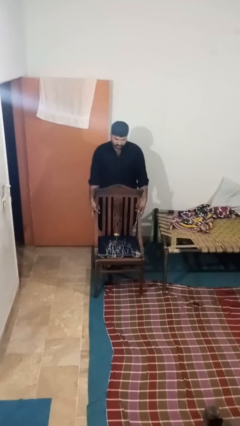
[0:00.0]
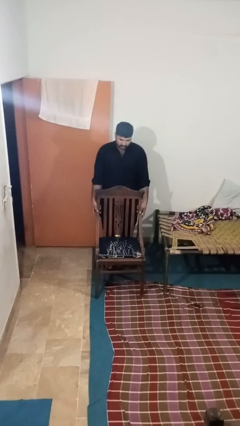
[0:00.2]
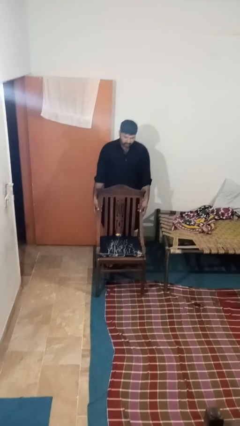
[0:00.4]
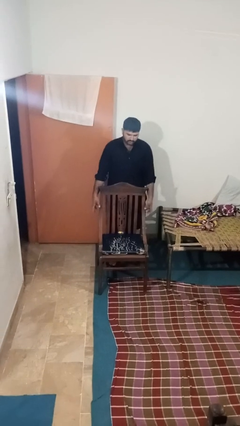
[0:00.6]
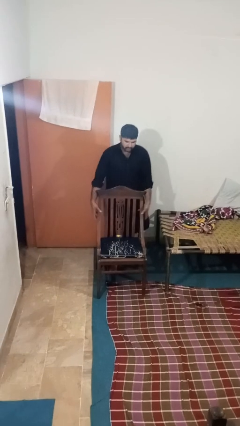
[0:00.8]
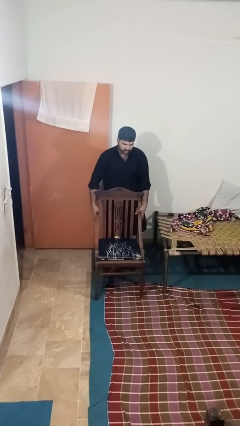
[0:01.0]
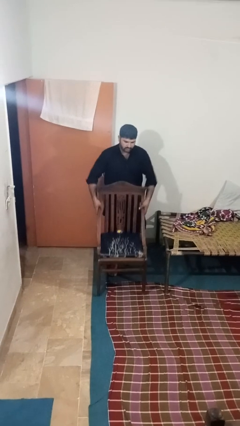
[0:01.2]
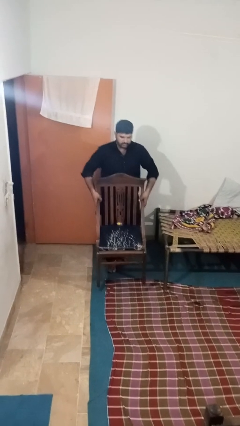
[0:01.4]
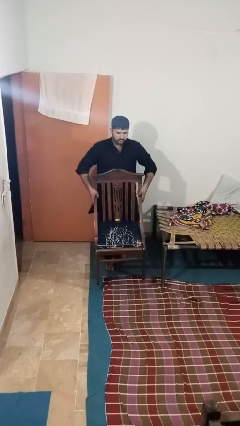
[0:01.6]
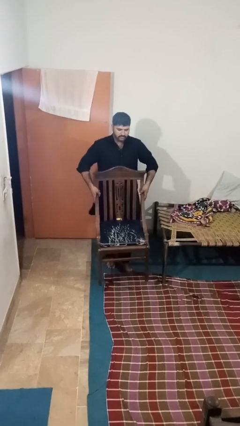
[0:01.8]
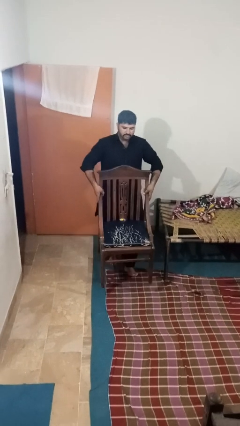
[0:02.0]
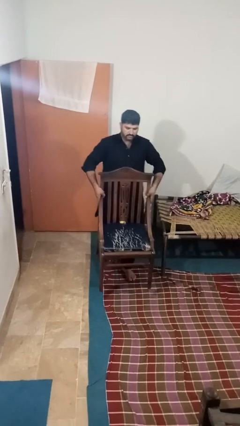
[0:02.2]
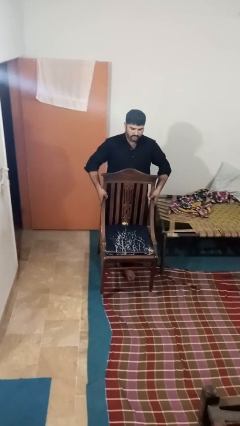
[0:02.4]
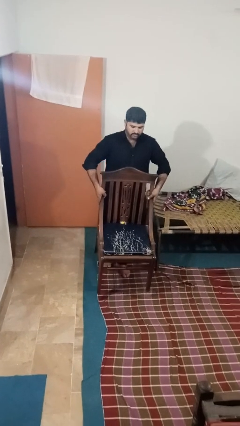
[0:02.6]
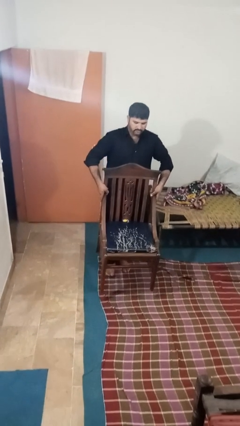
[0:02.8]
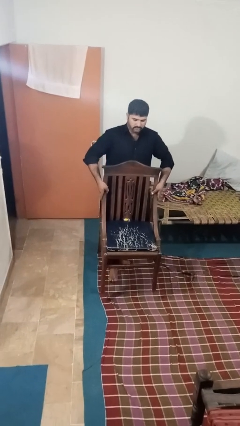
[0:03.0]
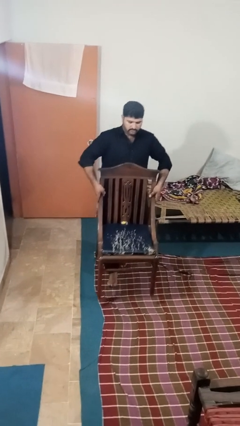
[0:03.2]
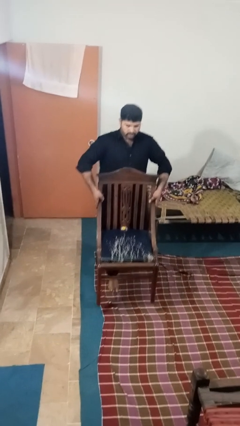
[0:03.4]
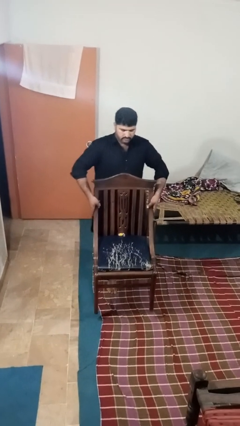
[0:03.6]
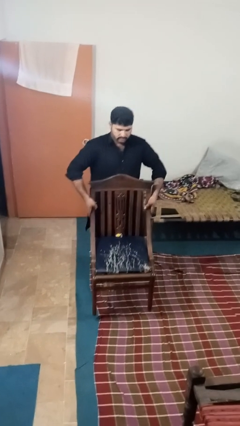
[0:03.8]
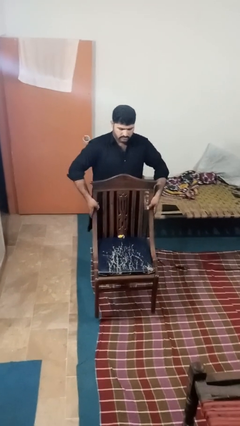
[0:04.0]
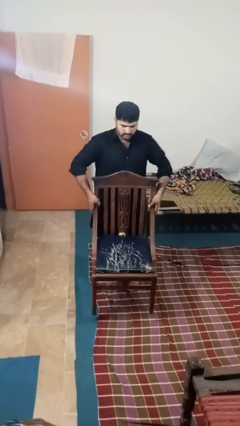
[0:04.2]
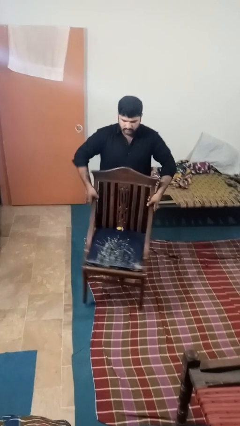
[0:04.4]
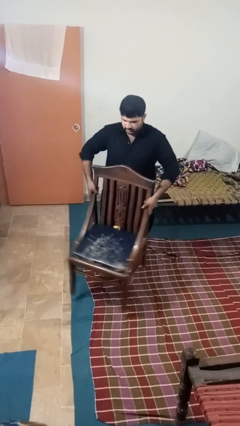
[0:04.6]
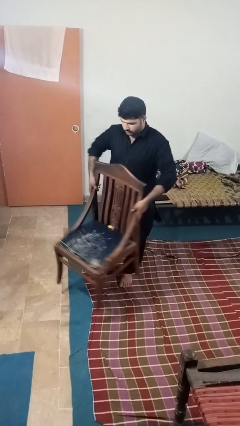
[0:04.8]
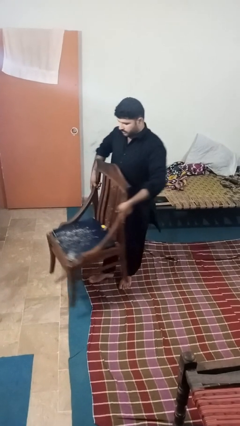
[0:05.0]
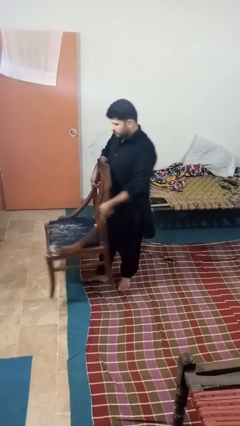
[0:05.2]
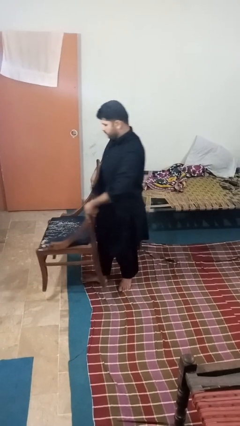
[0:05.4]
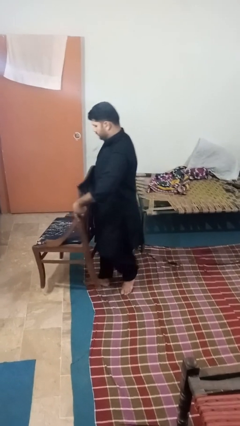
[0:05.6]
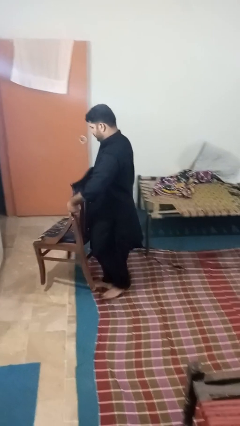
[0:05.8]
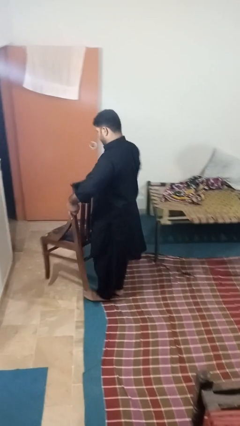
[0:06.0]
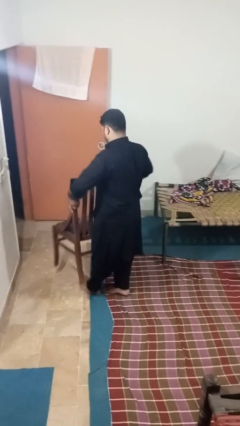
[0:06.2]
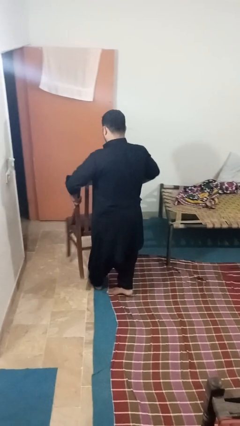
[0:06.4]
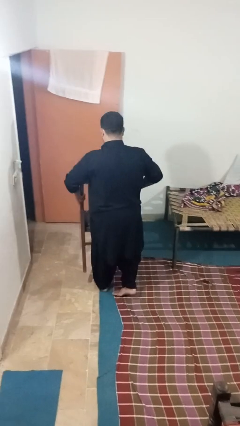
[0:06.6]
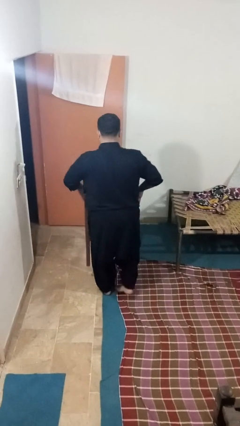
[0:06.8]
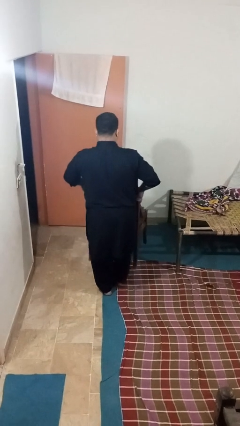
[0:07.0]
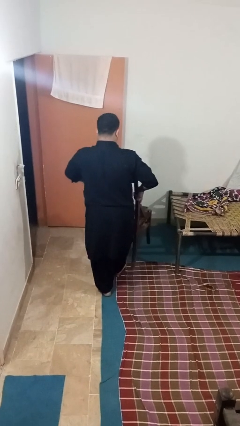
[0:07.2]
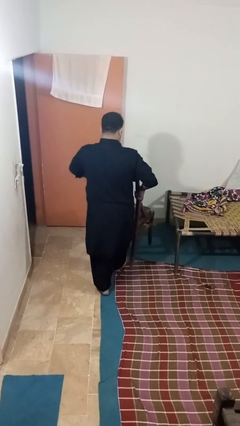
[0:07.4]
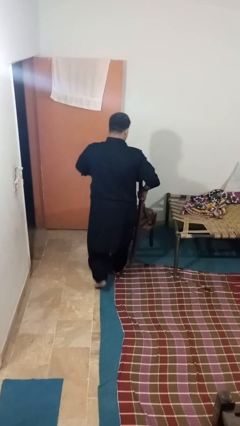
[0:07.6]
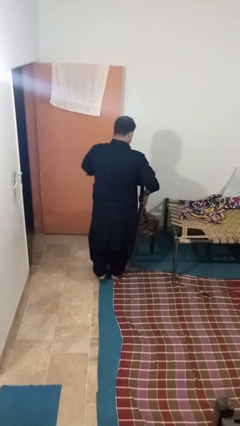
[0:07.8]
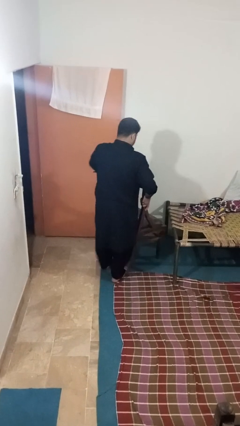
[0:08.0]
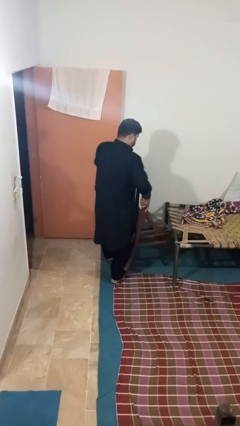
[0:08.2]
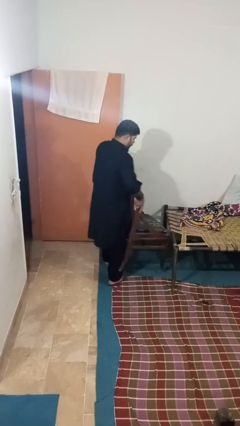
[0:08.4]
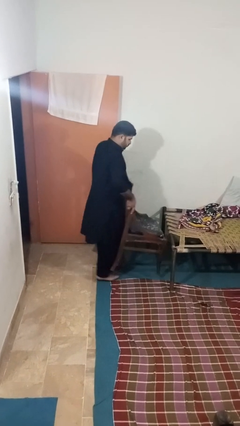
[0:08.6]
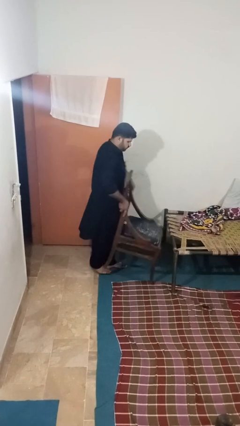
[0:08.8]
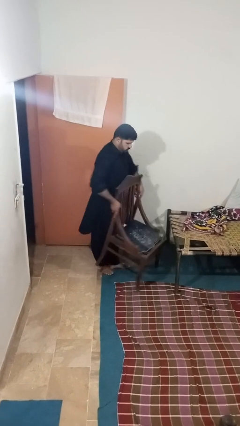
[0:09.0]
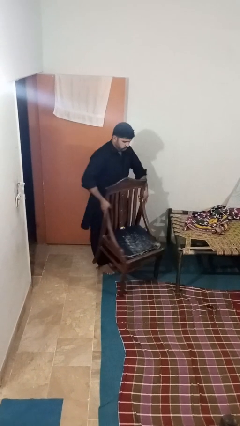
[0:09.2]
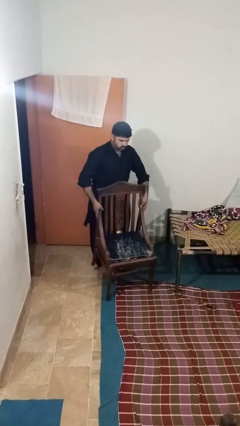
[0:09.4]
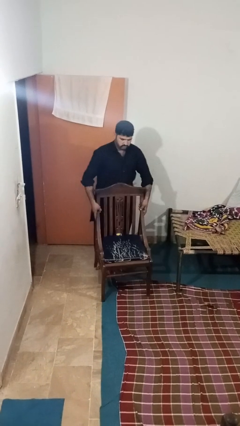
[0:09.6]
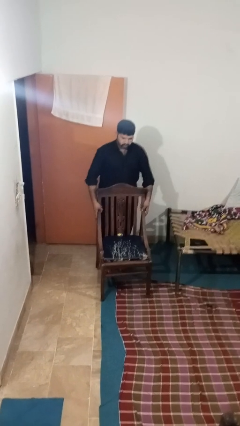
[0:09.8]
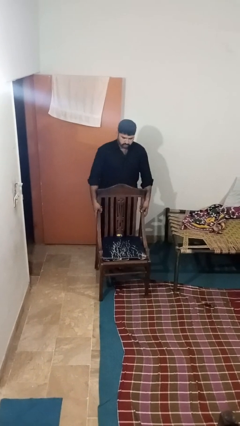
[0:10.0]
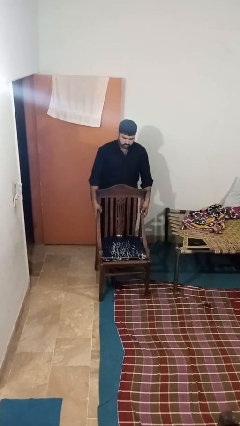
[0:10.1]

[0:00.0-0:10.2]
person carries furniture

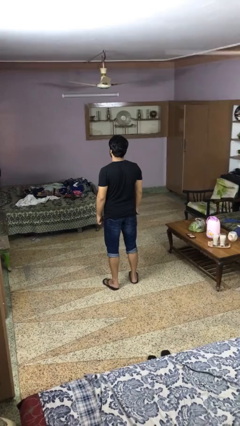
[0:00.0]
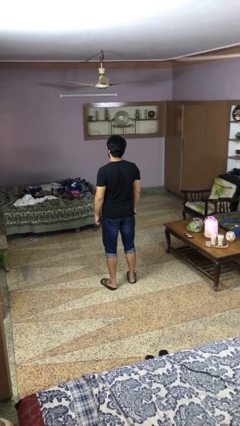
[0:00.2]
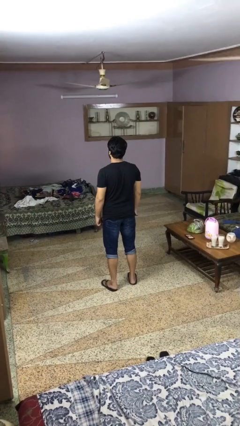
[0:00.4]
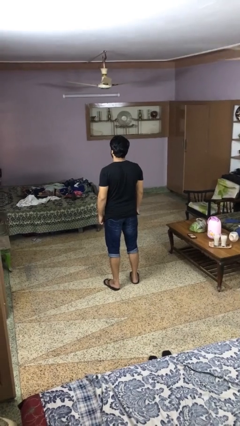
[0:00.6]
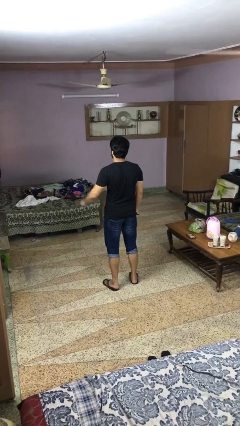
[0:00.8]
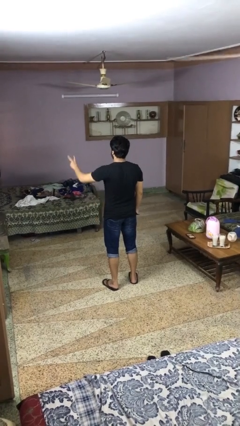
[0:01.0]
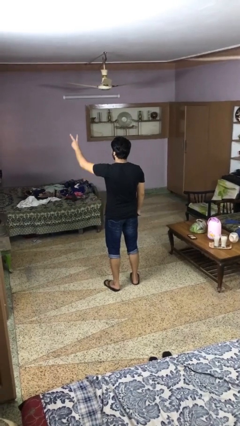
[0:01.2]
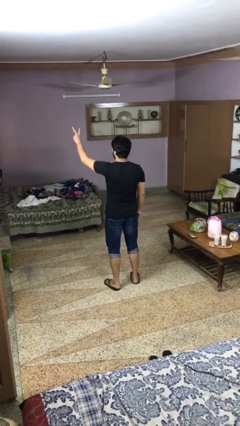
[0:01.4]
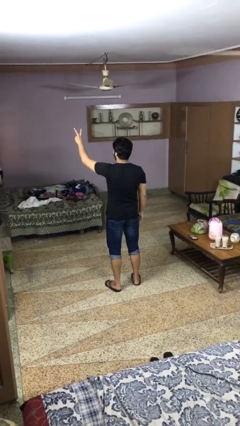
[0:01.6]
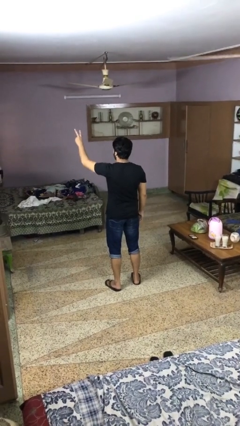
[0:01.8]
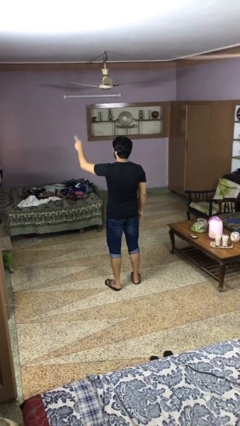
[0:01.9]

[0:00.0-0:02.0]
person gestures peace

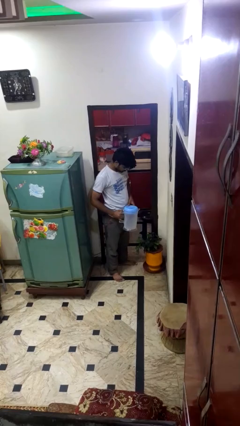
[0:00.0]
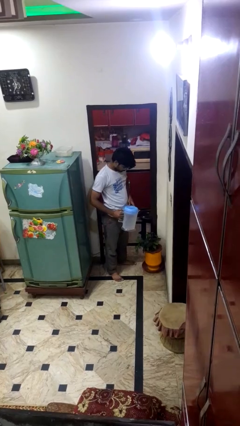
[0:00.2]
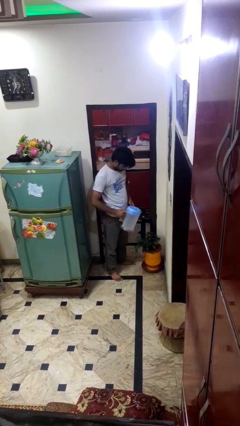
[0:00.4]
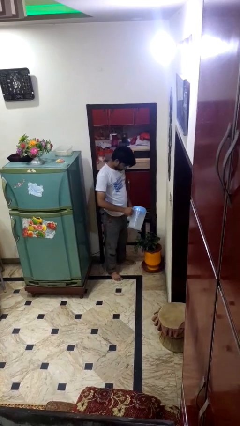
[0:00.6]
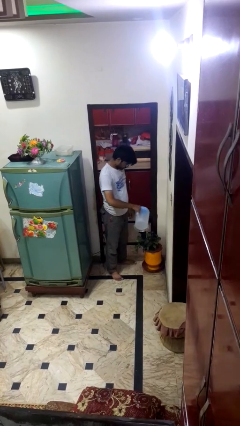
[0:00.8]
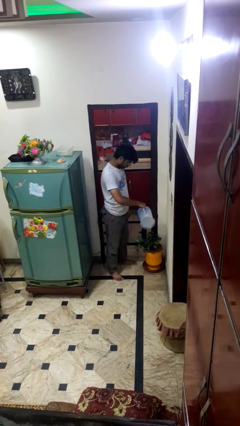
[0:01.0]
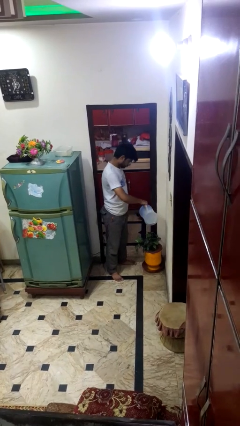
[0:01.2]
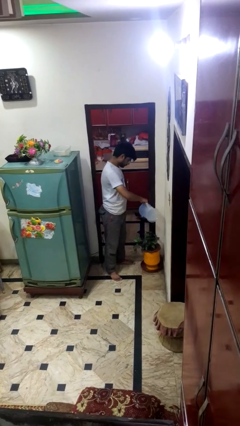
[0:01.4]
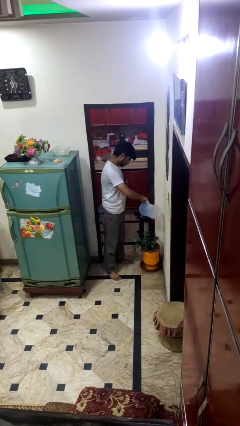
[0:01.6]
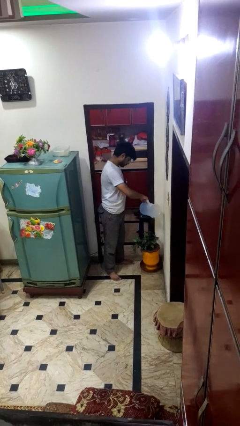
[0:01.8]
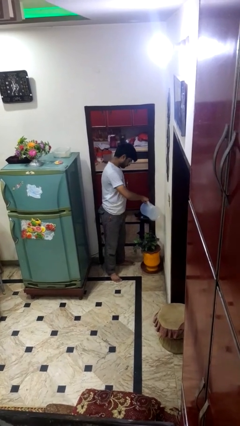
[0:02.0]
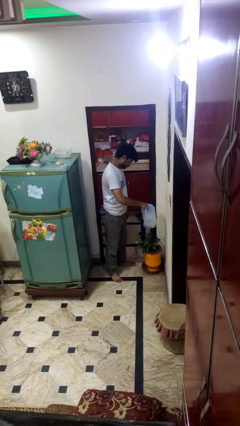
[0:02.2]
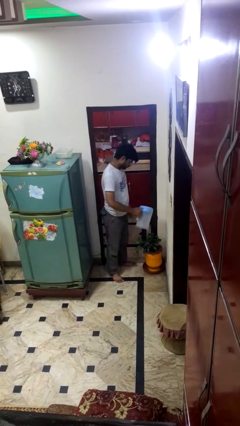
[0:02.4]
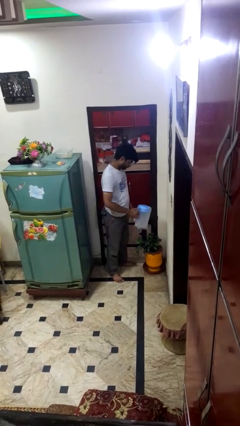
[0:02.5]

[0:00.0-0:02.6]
person waters houseplant

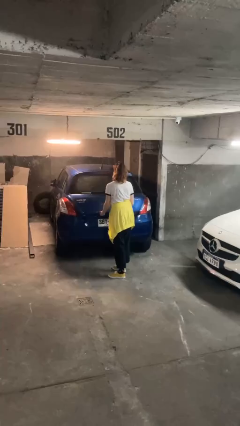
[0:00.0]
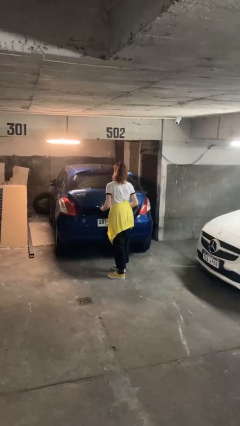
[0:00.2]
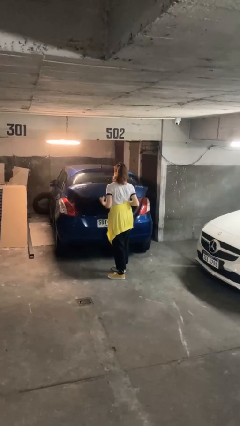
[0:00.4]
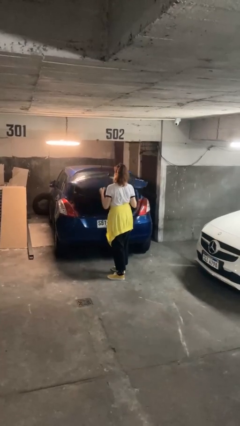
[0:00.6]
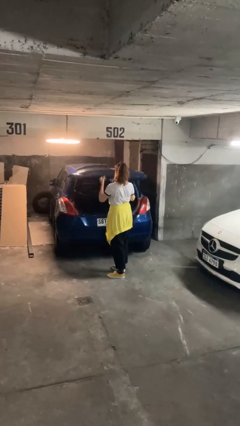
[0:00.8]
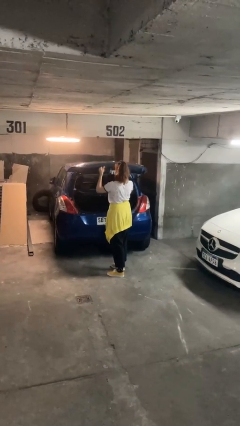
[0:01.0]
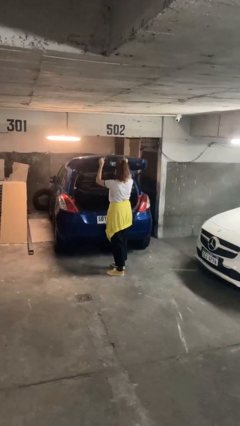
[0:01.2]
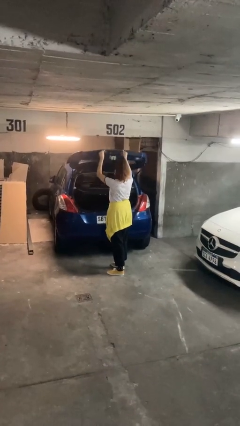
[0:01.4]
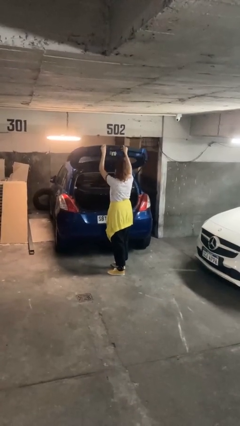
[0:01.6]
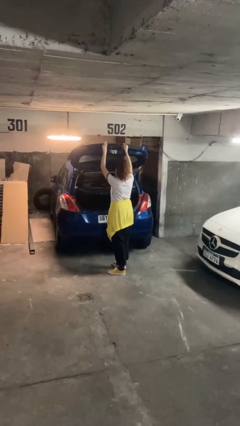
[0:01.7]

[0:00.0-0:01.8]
person opens car trunk

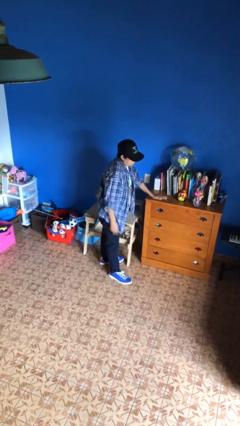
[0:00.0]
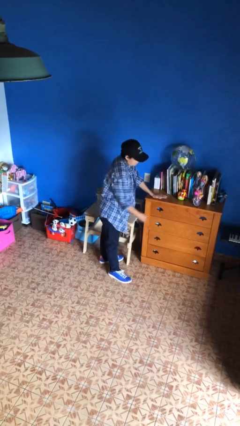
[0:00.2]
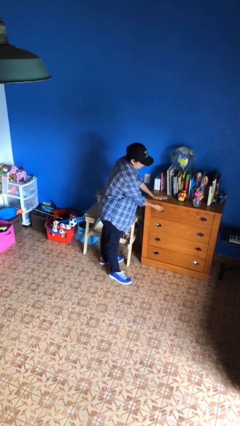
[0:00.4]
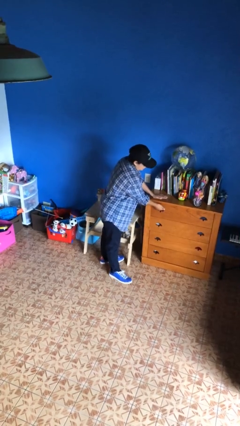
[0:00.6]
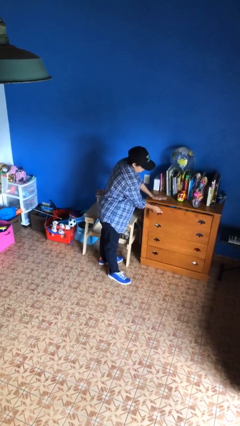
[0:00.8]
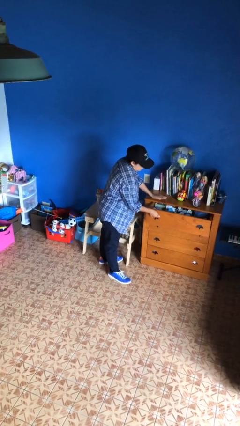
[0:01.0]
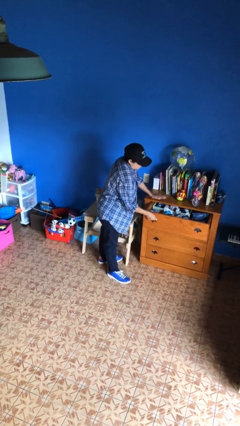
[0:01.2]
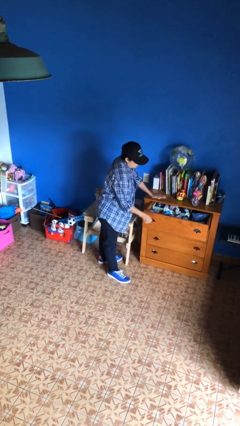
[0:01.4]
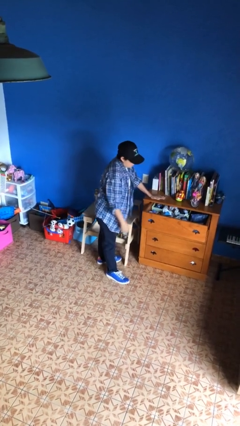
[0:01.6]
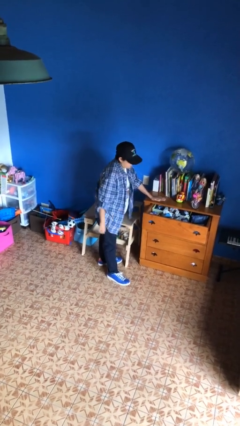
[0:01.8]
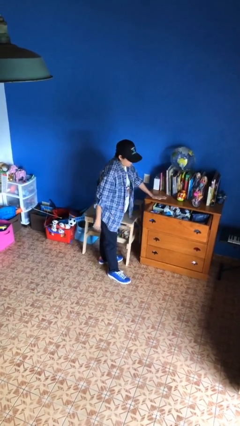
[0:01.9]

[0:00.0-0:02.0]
person opens dresser drawer
